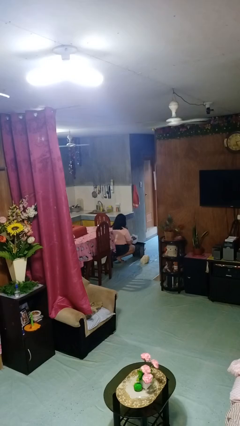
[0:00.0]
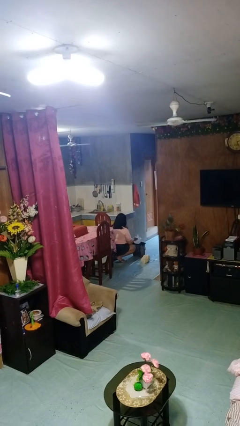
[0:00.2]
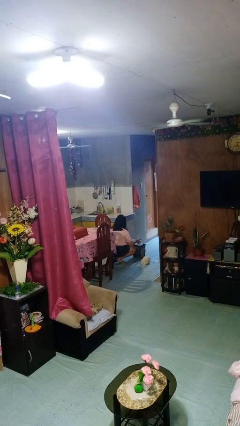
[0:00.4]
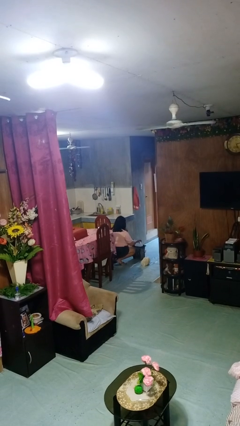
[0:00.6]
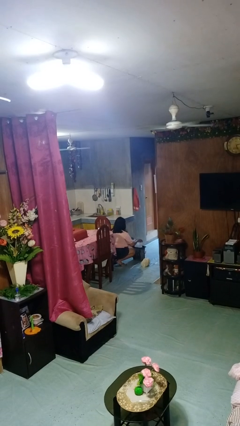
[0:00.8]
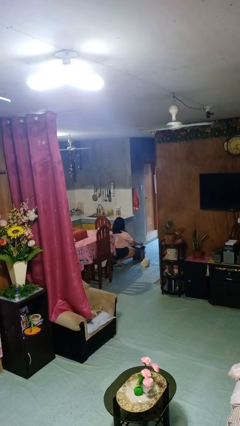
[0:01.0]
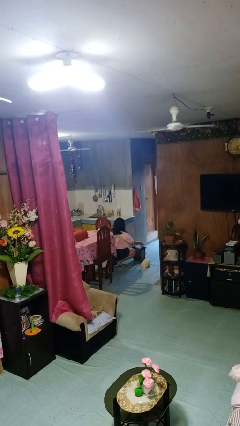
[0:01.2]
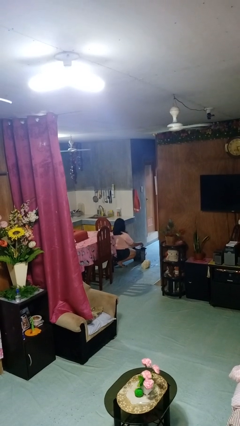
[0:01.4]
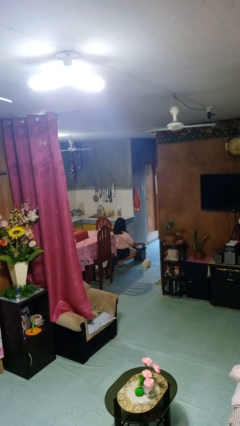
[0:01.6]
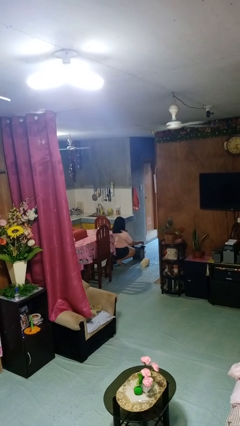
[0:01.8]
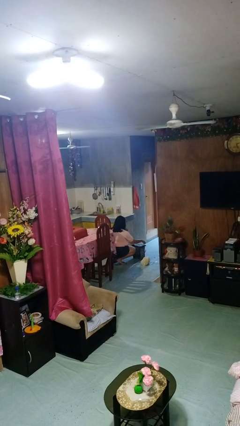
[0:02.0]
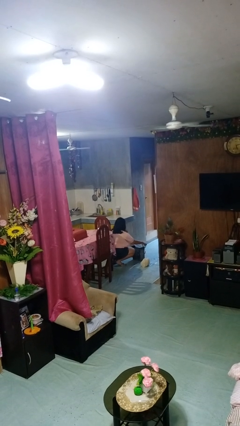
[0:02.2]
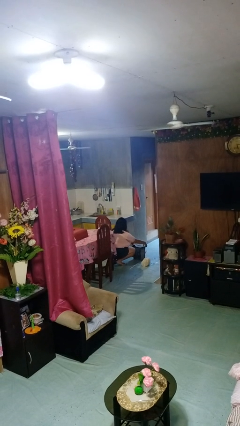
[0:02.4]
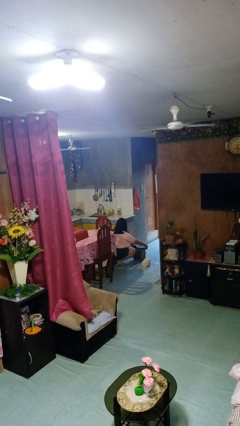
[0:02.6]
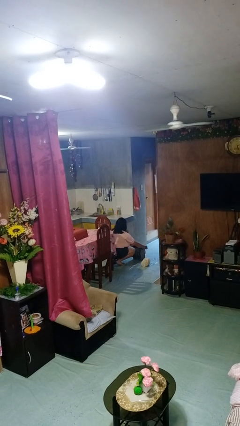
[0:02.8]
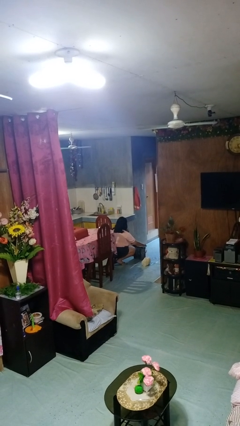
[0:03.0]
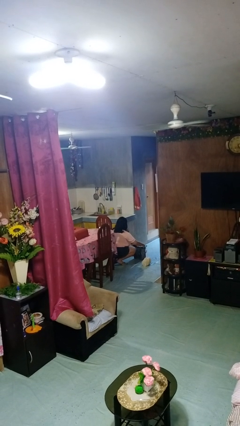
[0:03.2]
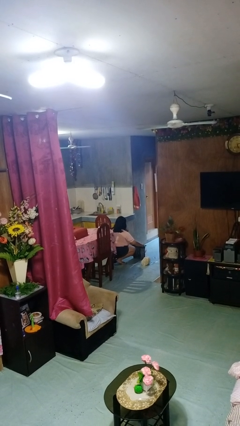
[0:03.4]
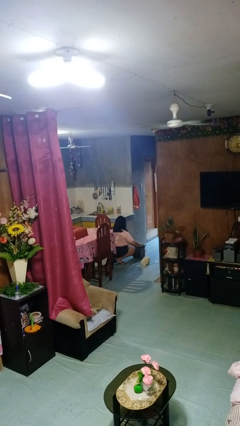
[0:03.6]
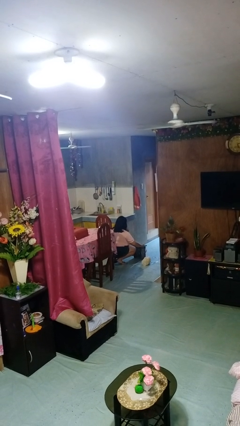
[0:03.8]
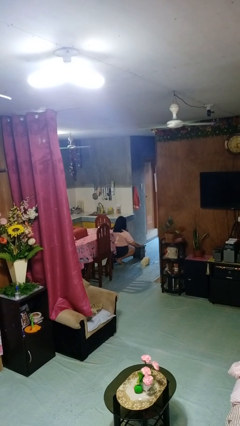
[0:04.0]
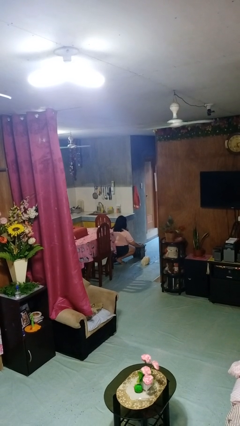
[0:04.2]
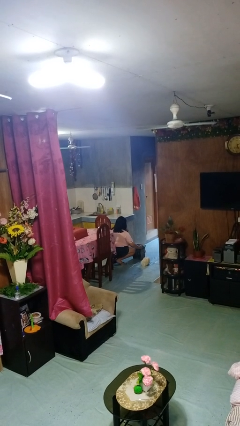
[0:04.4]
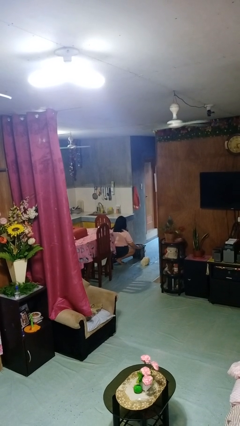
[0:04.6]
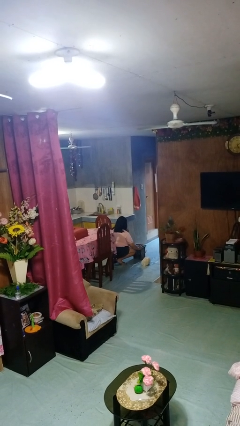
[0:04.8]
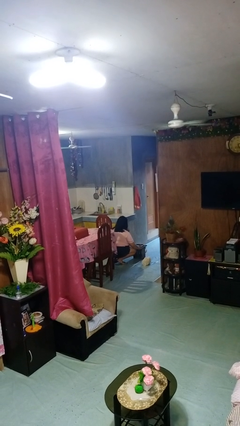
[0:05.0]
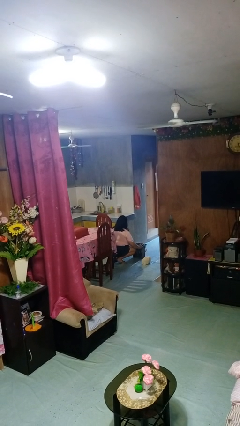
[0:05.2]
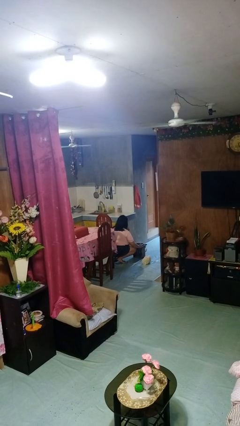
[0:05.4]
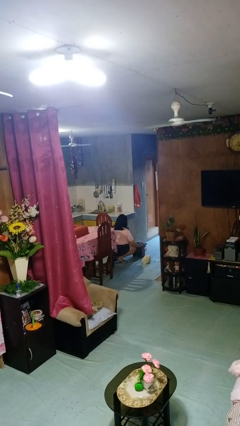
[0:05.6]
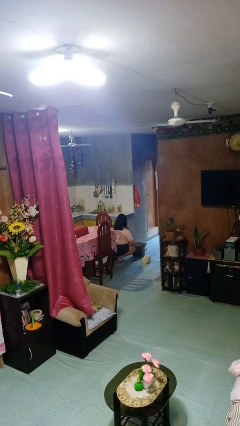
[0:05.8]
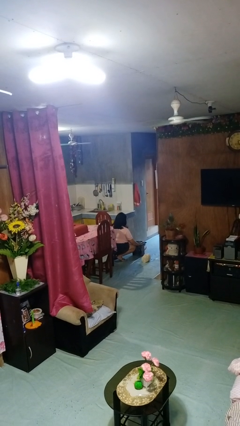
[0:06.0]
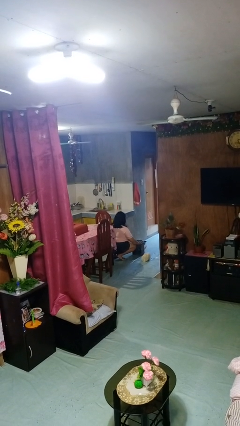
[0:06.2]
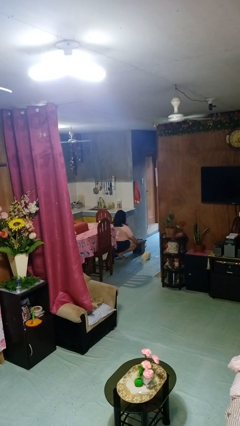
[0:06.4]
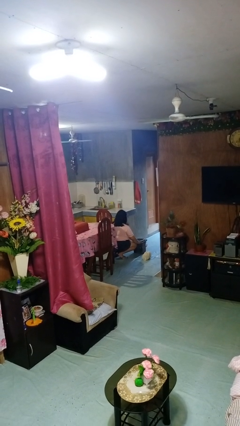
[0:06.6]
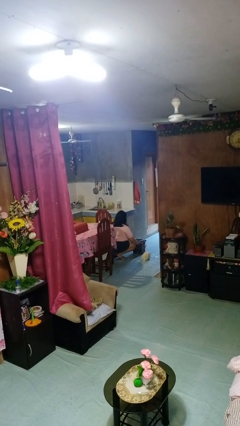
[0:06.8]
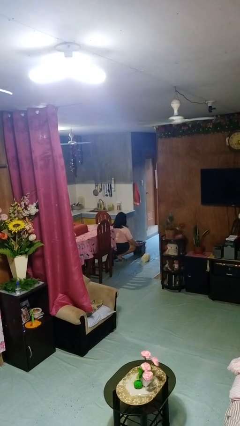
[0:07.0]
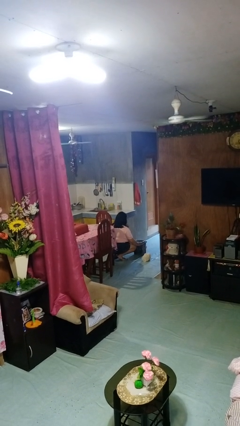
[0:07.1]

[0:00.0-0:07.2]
person inserts trashbag into trashcan

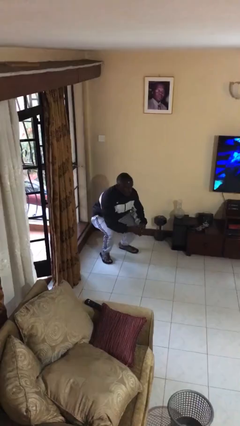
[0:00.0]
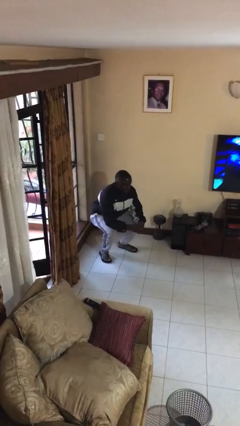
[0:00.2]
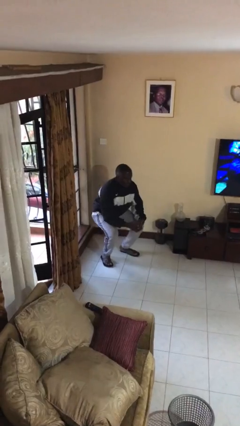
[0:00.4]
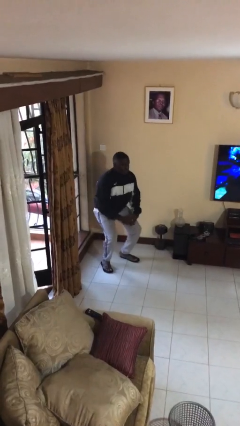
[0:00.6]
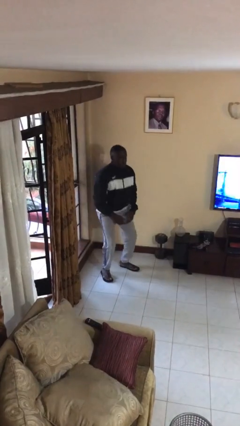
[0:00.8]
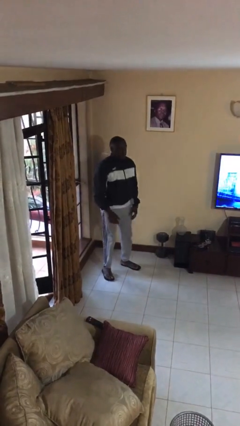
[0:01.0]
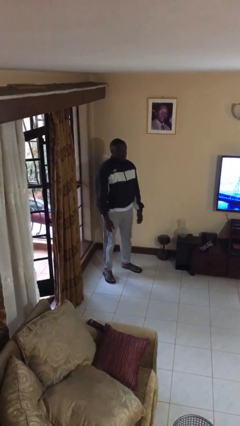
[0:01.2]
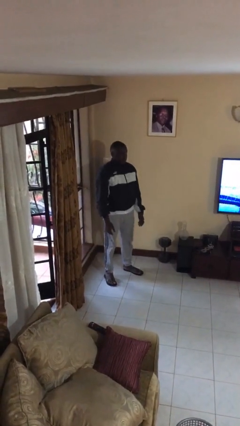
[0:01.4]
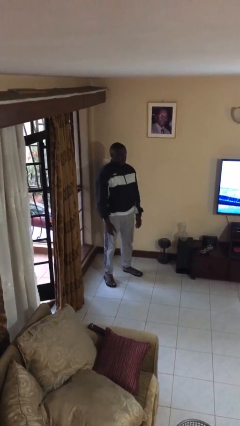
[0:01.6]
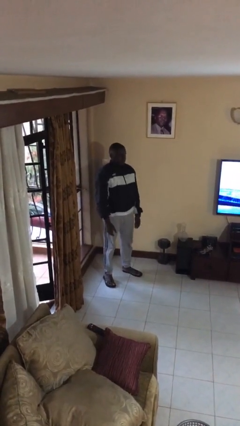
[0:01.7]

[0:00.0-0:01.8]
person stands up

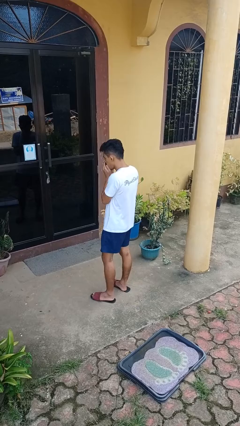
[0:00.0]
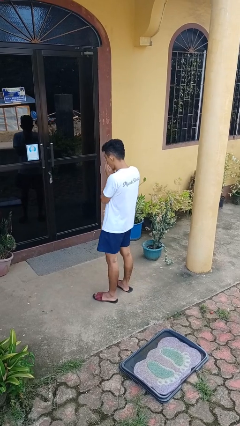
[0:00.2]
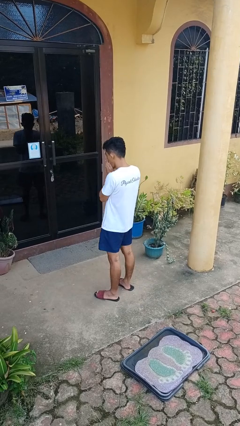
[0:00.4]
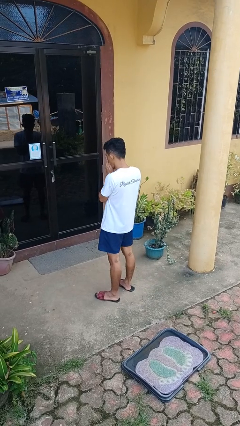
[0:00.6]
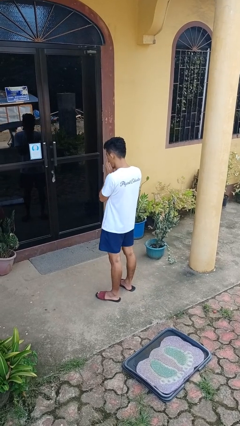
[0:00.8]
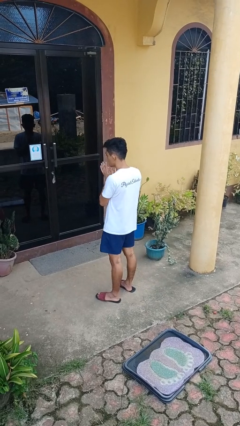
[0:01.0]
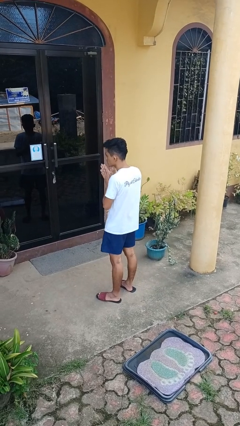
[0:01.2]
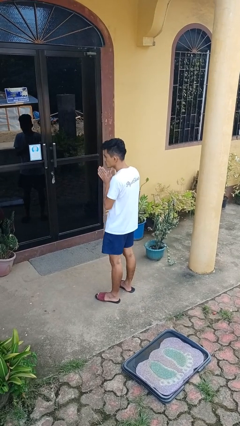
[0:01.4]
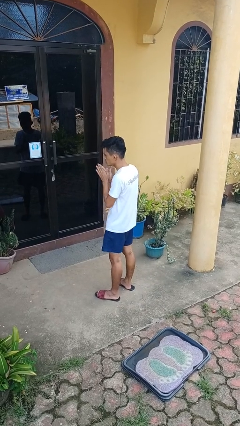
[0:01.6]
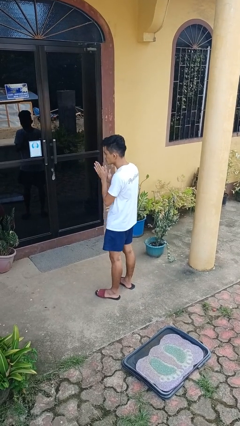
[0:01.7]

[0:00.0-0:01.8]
person blows into hands

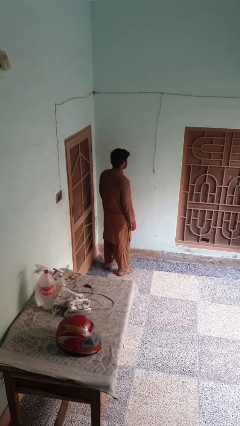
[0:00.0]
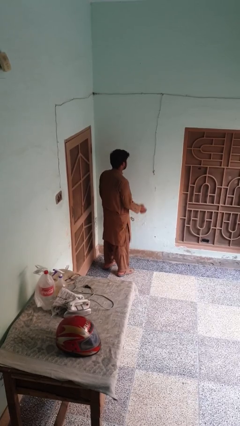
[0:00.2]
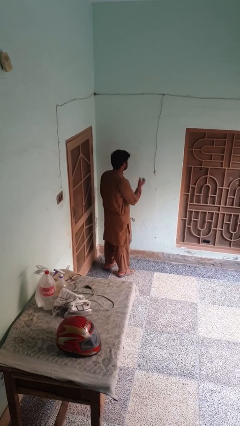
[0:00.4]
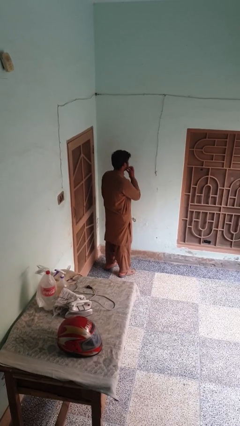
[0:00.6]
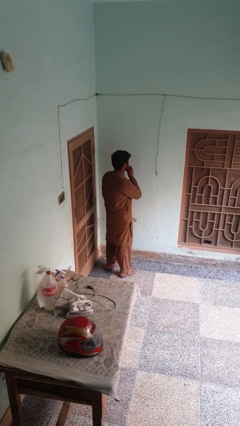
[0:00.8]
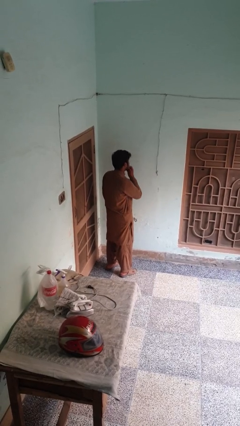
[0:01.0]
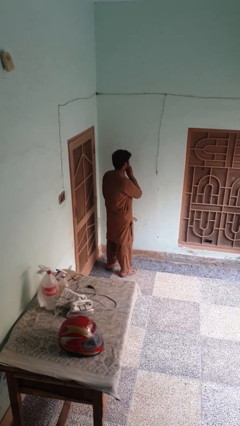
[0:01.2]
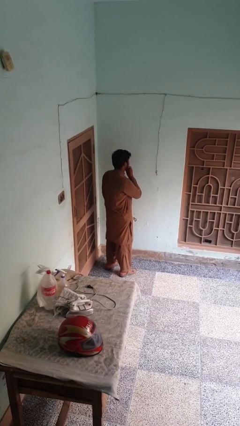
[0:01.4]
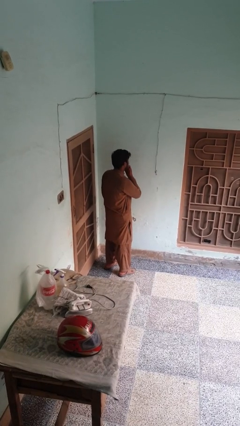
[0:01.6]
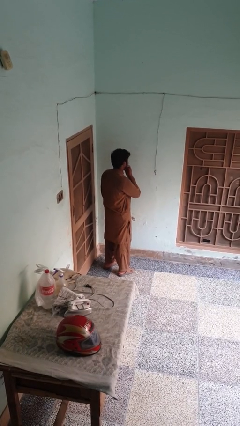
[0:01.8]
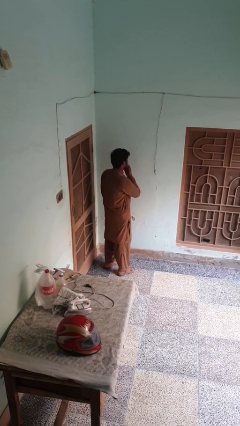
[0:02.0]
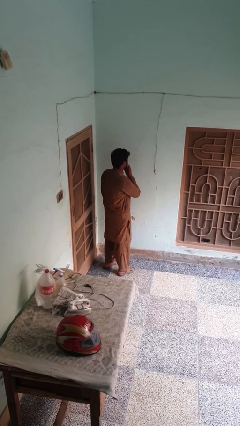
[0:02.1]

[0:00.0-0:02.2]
person strokes chin

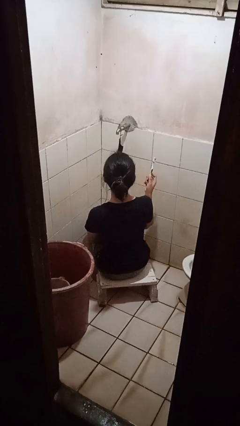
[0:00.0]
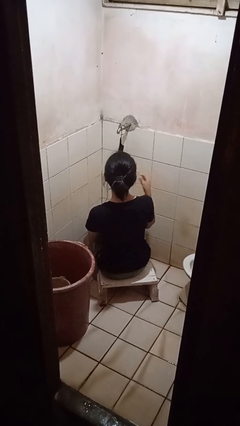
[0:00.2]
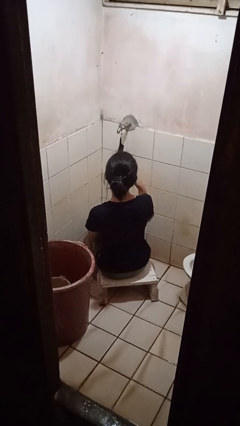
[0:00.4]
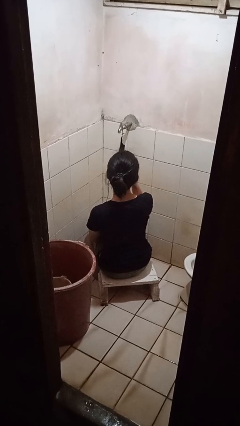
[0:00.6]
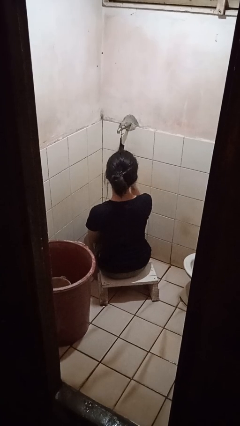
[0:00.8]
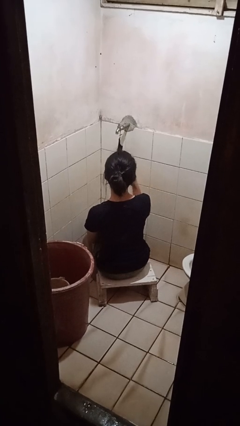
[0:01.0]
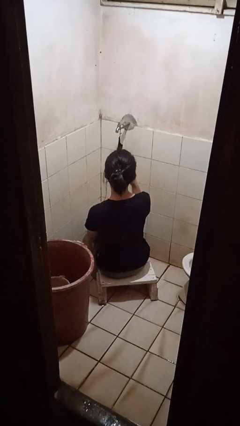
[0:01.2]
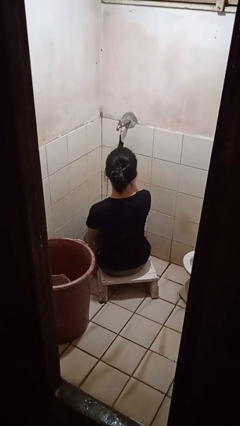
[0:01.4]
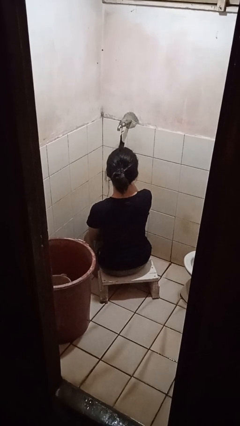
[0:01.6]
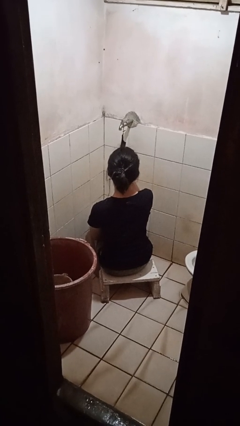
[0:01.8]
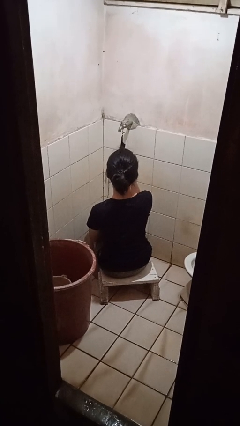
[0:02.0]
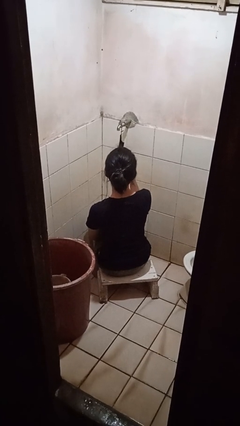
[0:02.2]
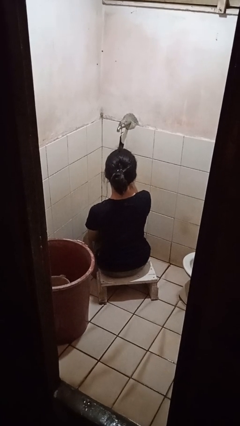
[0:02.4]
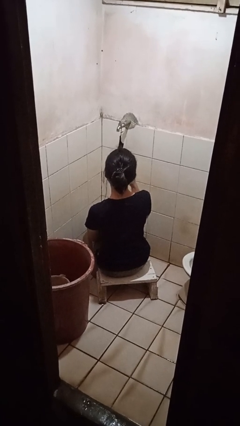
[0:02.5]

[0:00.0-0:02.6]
person brushes teeth

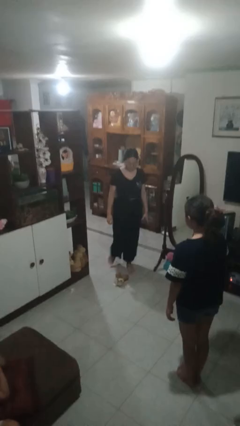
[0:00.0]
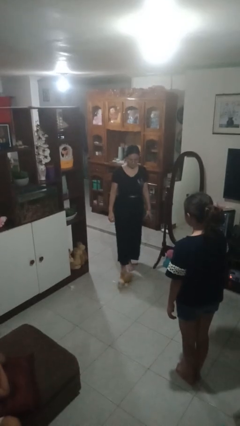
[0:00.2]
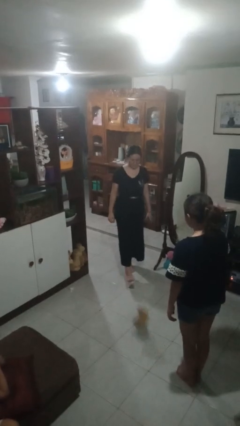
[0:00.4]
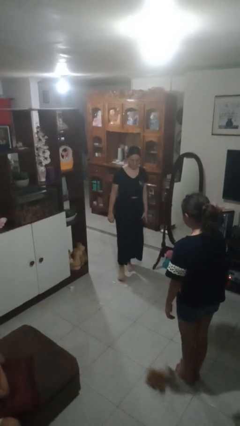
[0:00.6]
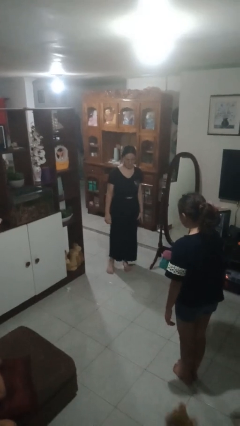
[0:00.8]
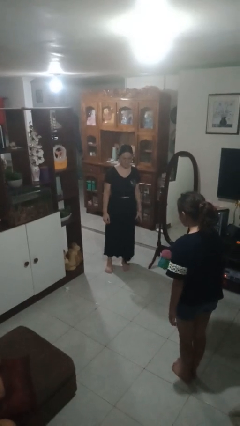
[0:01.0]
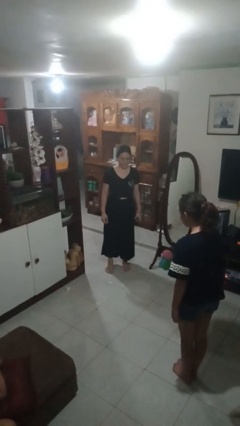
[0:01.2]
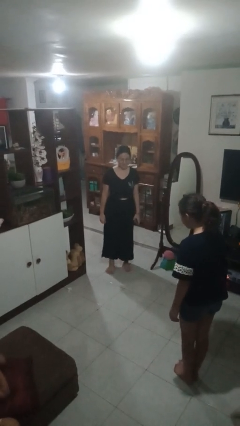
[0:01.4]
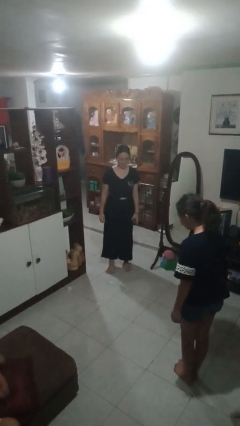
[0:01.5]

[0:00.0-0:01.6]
person kicks object to person
